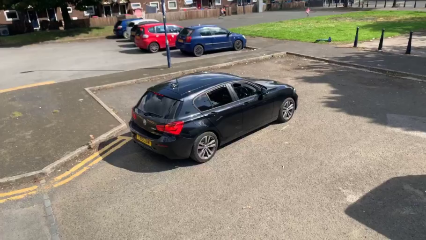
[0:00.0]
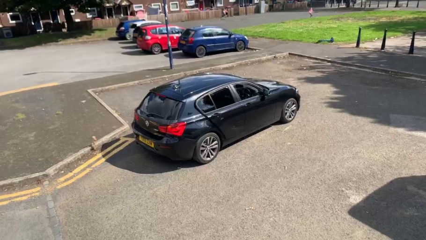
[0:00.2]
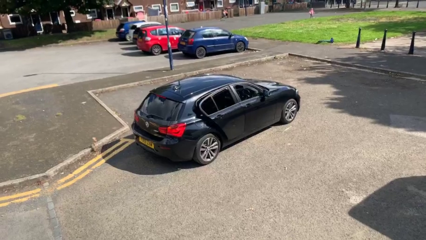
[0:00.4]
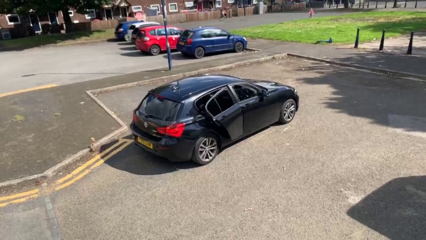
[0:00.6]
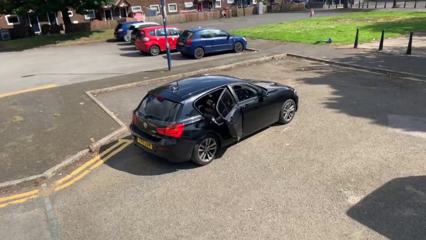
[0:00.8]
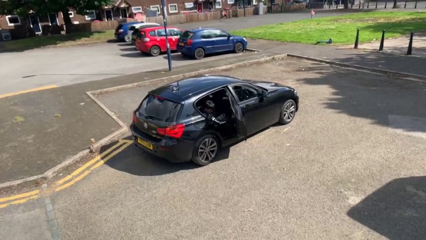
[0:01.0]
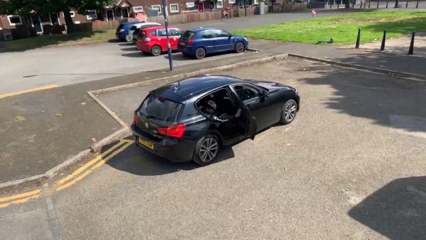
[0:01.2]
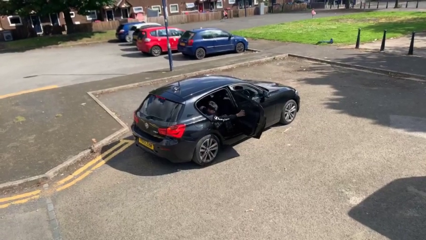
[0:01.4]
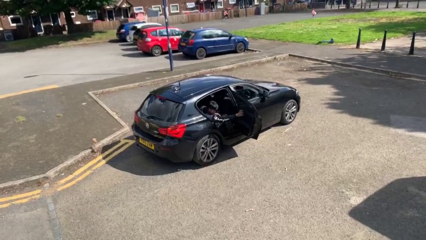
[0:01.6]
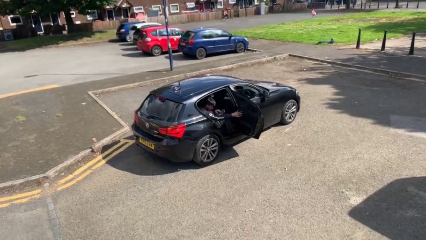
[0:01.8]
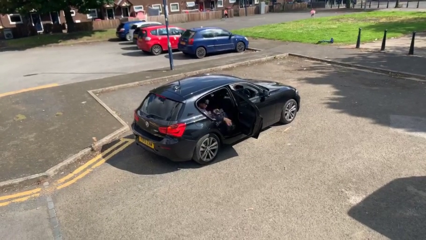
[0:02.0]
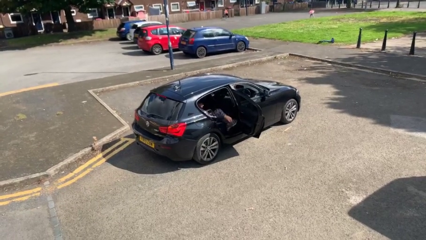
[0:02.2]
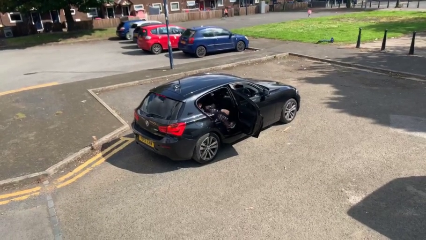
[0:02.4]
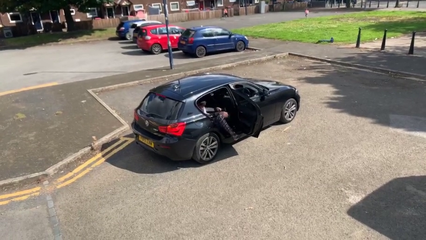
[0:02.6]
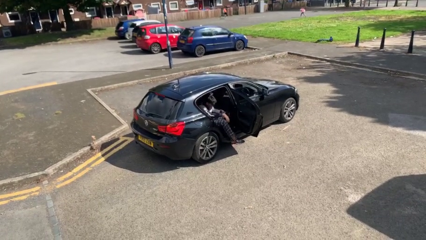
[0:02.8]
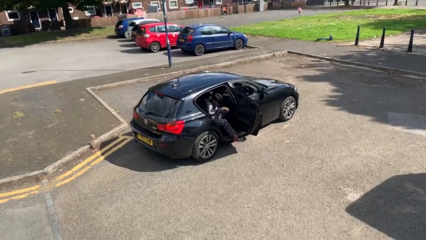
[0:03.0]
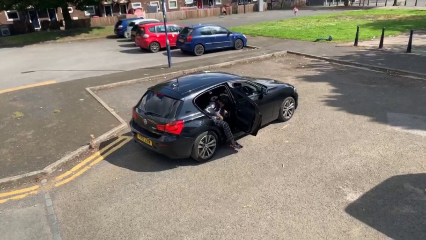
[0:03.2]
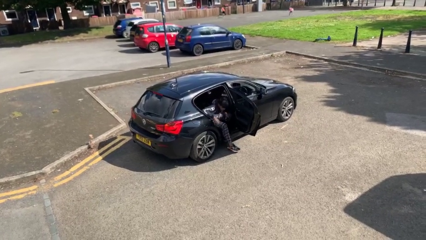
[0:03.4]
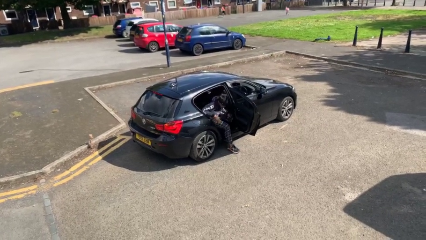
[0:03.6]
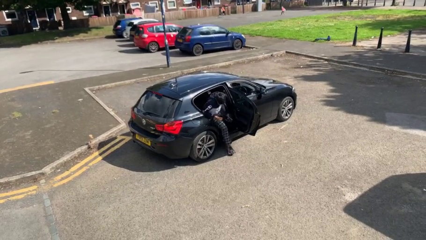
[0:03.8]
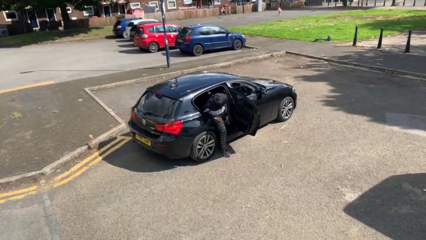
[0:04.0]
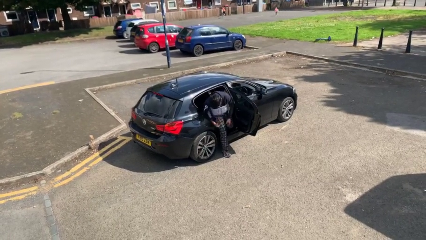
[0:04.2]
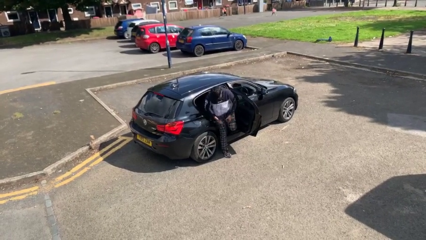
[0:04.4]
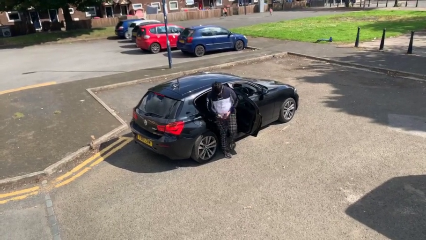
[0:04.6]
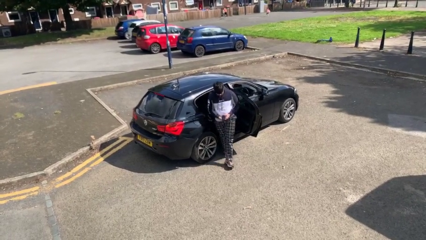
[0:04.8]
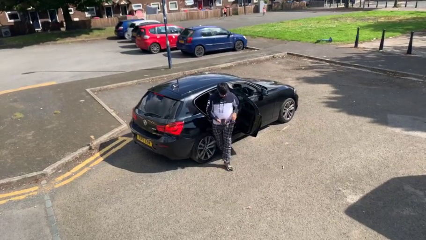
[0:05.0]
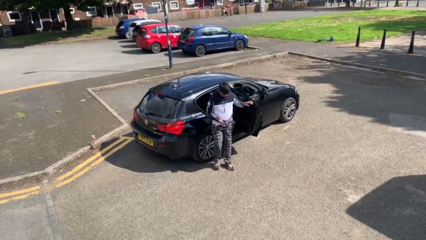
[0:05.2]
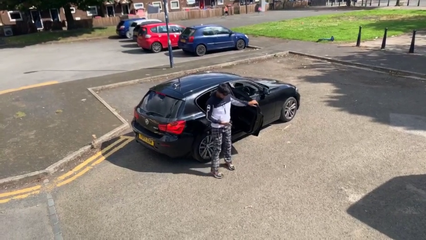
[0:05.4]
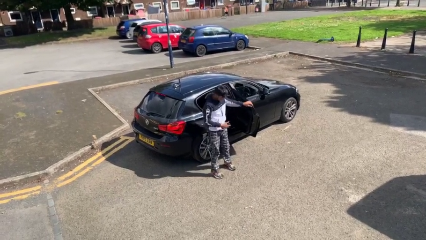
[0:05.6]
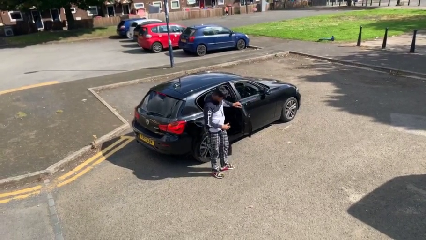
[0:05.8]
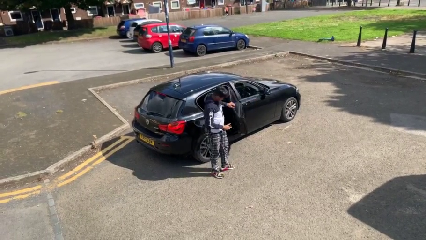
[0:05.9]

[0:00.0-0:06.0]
car drops off person

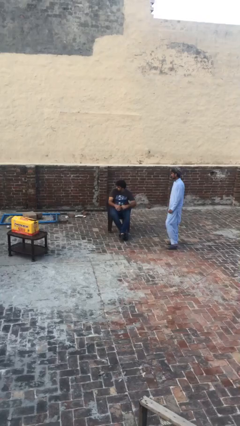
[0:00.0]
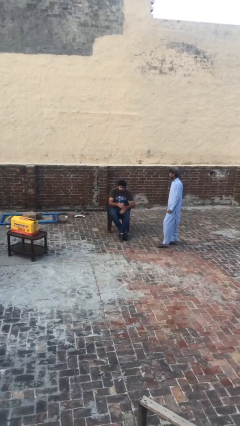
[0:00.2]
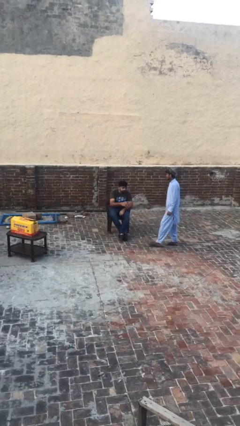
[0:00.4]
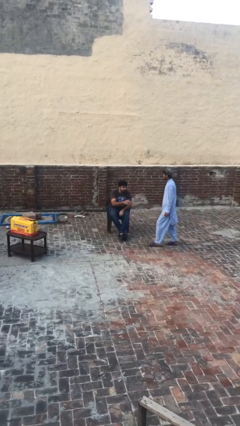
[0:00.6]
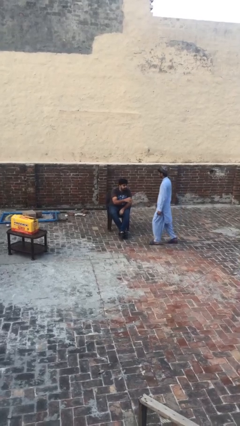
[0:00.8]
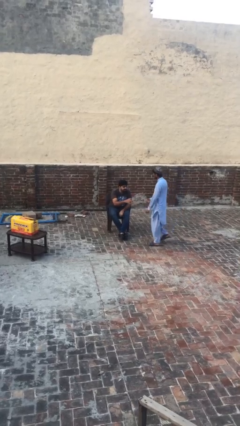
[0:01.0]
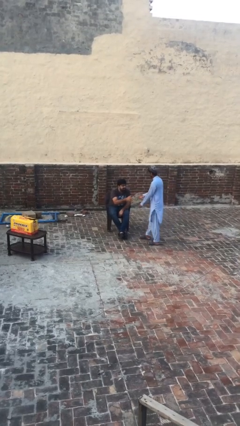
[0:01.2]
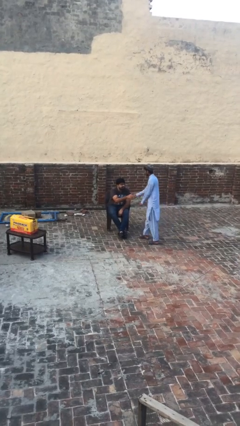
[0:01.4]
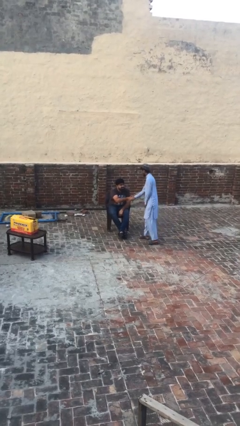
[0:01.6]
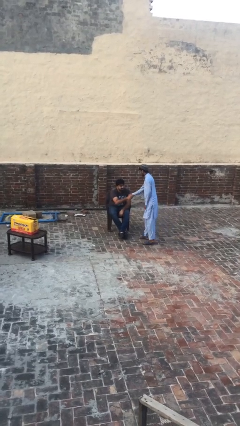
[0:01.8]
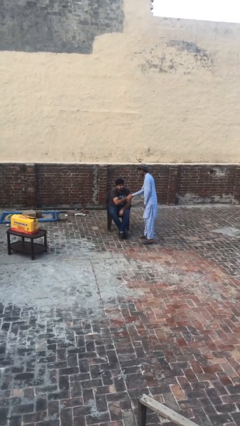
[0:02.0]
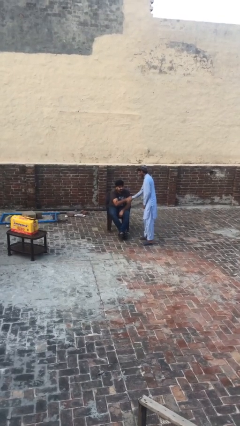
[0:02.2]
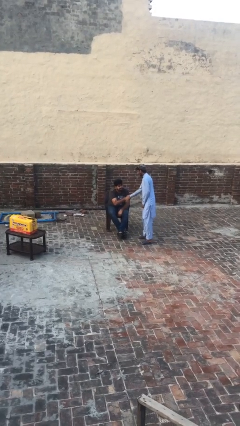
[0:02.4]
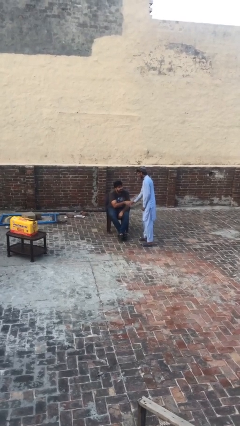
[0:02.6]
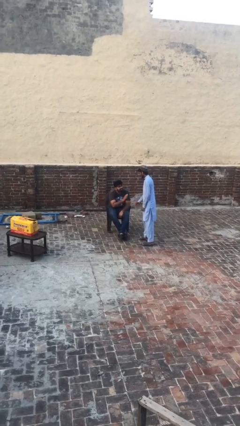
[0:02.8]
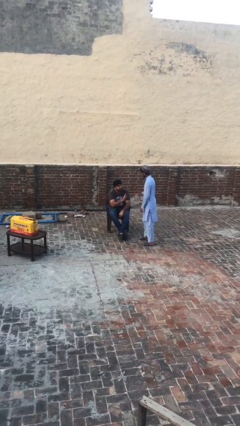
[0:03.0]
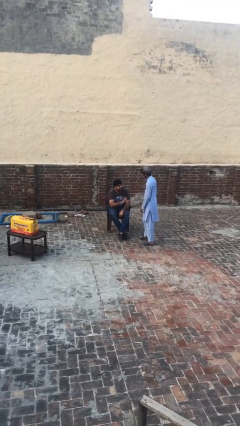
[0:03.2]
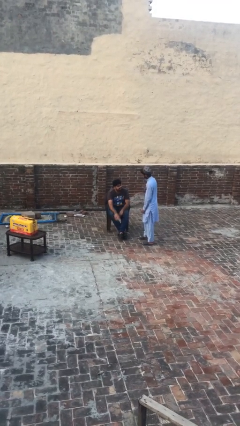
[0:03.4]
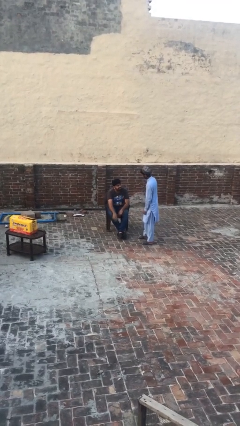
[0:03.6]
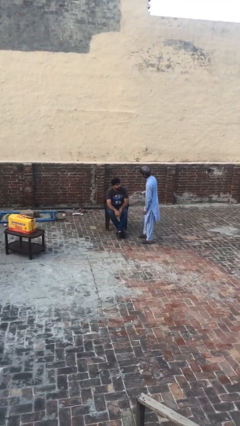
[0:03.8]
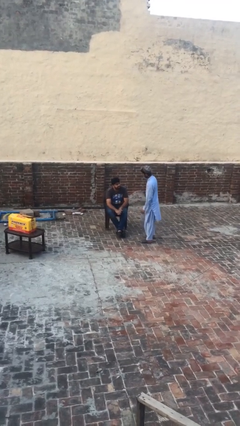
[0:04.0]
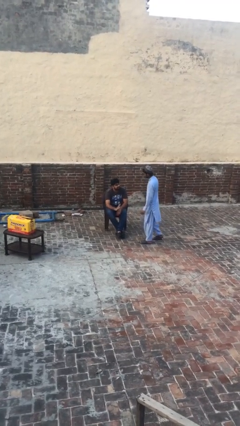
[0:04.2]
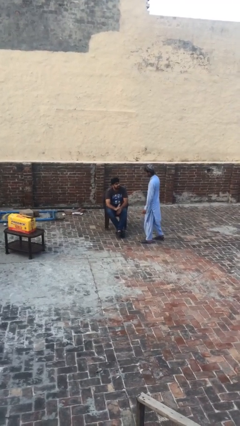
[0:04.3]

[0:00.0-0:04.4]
person shakes hand

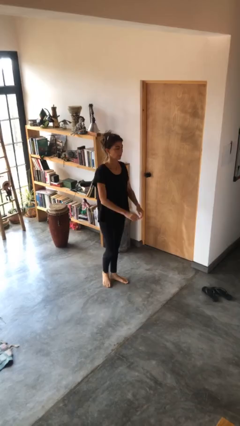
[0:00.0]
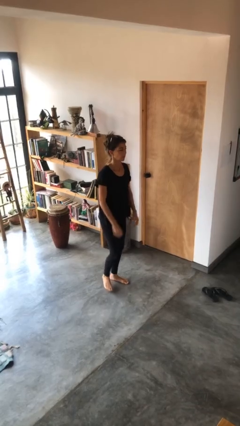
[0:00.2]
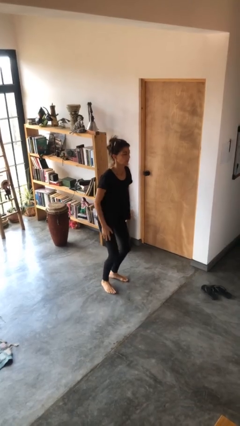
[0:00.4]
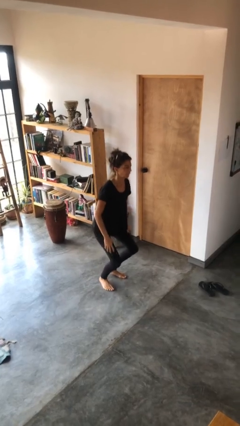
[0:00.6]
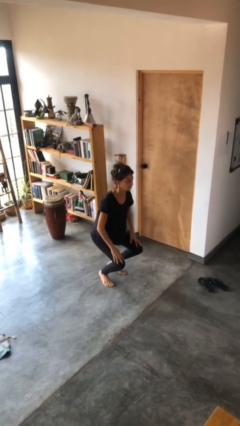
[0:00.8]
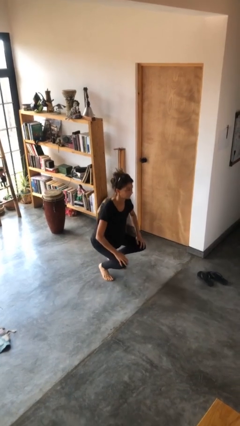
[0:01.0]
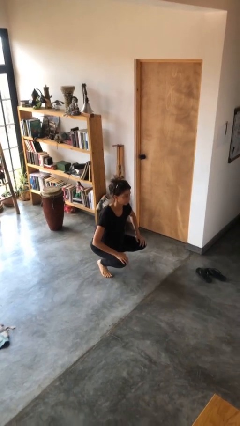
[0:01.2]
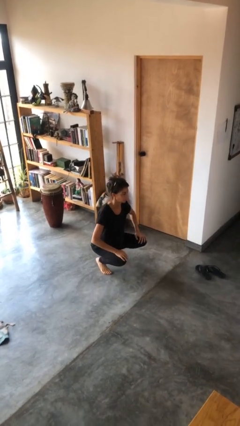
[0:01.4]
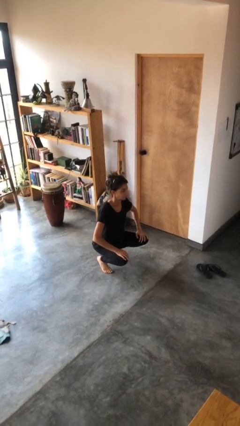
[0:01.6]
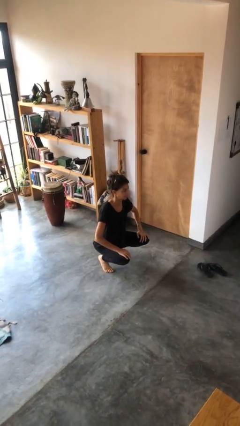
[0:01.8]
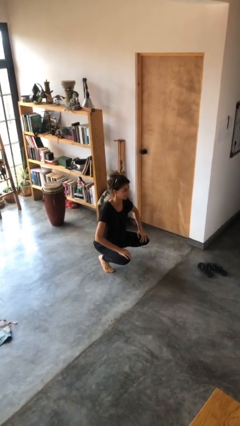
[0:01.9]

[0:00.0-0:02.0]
person squats

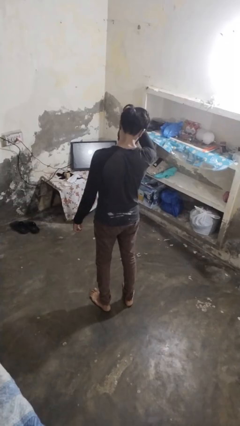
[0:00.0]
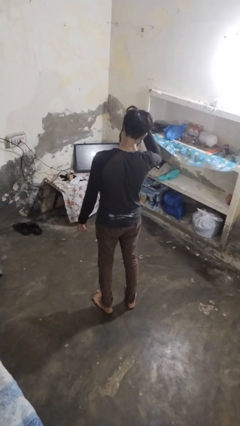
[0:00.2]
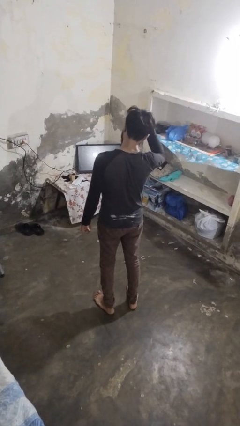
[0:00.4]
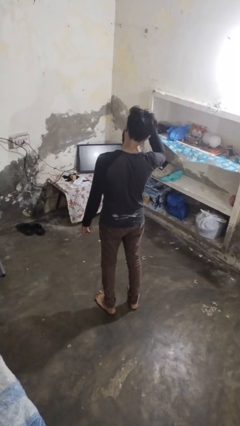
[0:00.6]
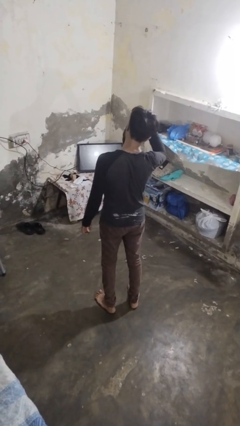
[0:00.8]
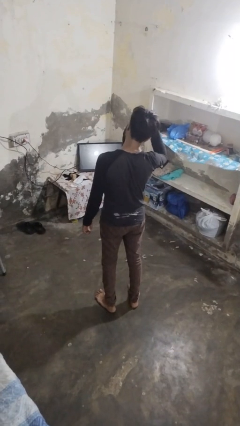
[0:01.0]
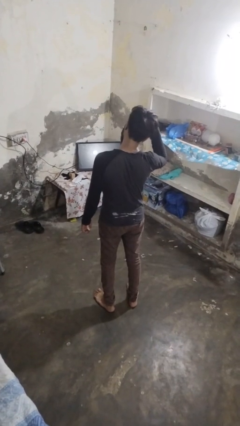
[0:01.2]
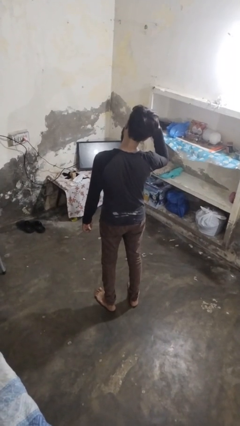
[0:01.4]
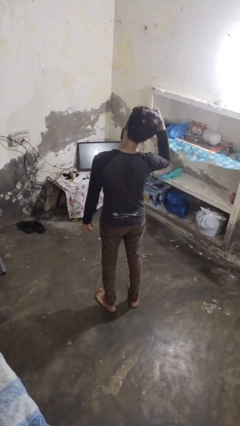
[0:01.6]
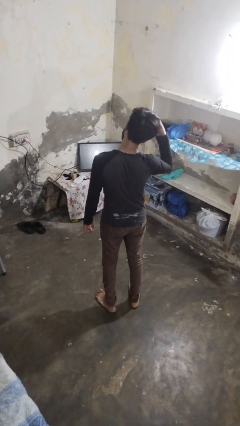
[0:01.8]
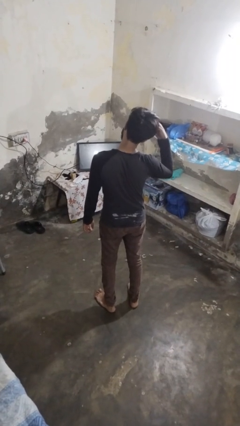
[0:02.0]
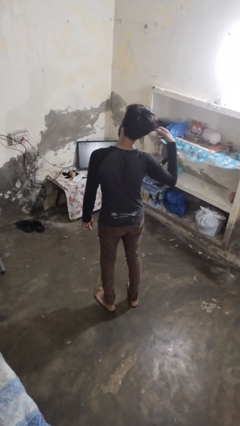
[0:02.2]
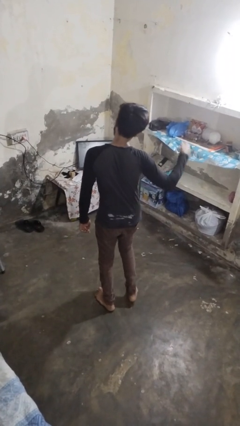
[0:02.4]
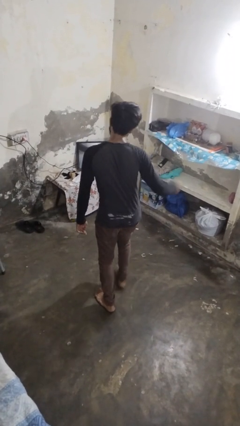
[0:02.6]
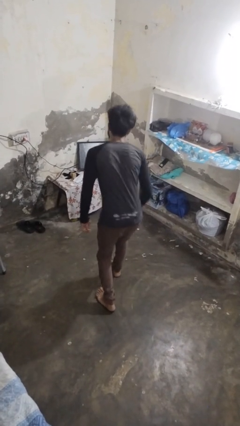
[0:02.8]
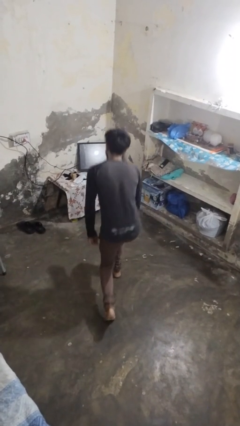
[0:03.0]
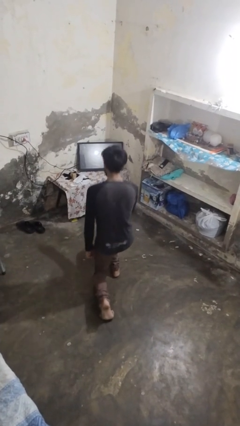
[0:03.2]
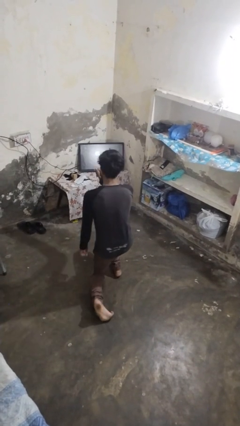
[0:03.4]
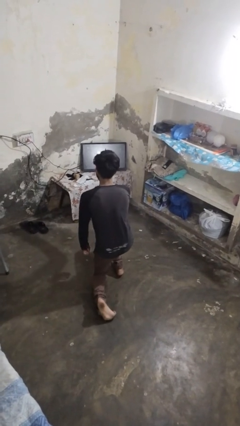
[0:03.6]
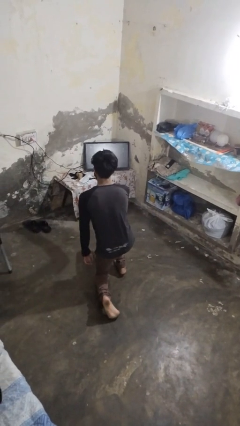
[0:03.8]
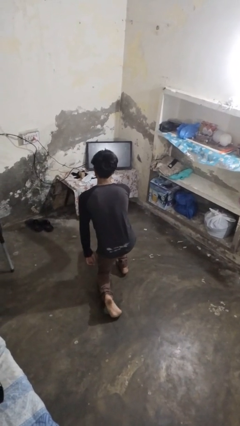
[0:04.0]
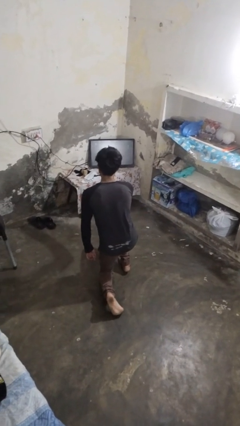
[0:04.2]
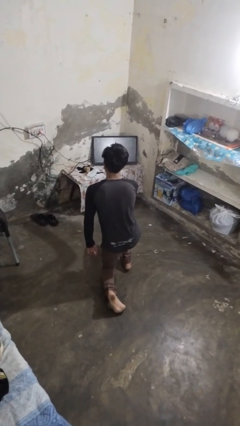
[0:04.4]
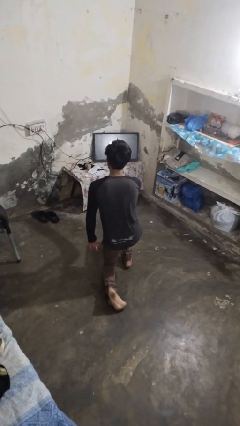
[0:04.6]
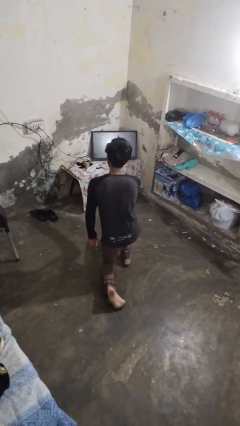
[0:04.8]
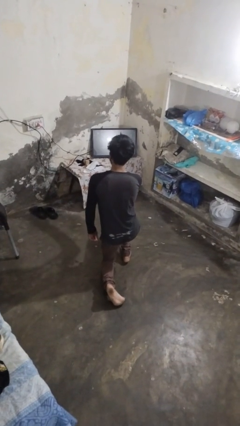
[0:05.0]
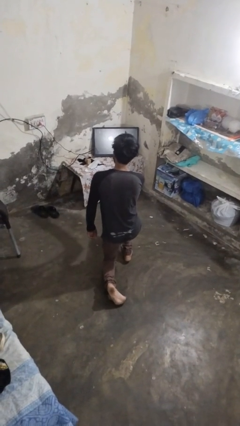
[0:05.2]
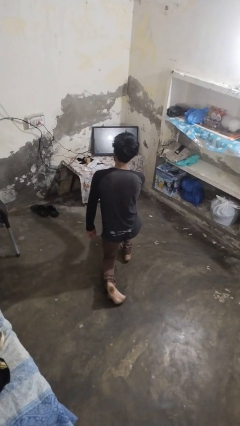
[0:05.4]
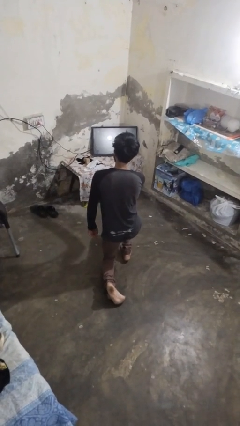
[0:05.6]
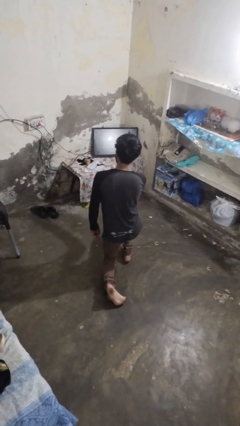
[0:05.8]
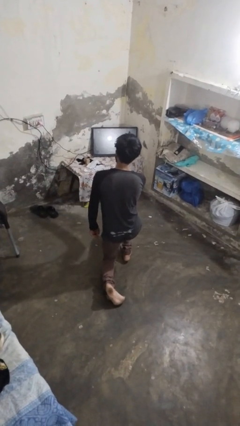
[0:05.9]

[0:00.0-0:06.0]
person kneels
